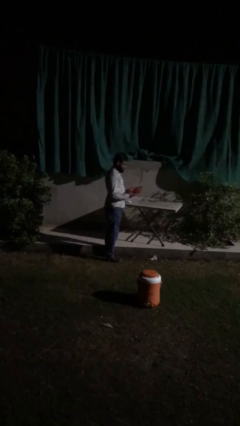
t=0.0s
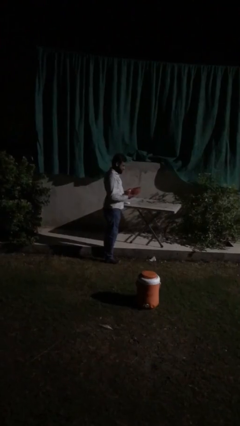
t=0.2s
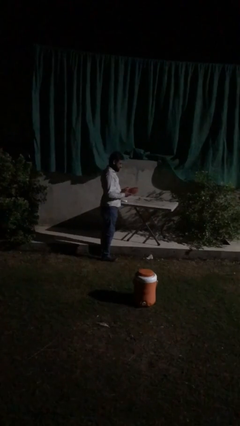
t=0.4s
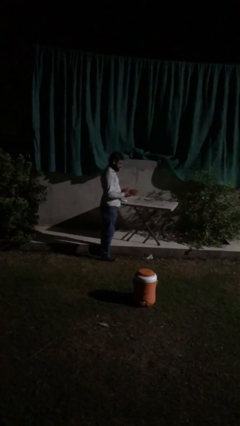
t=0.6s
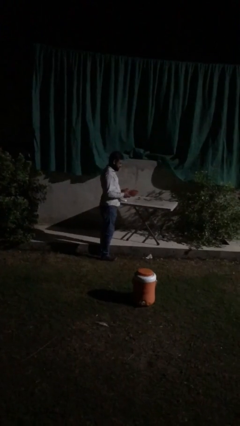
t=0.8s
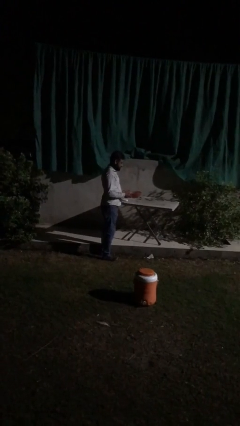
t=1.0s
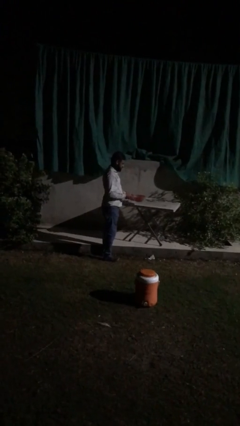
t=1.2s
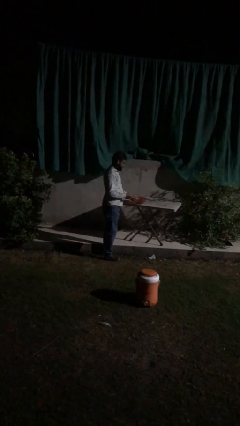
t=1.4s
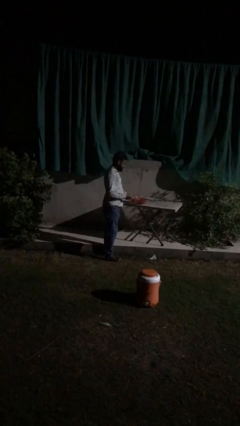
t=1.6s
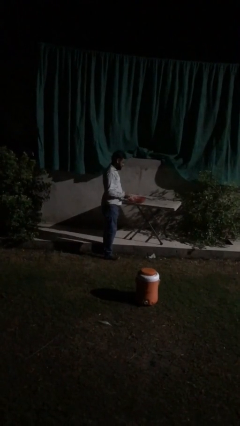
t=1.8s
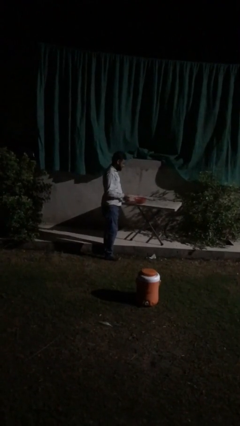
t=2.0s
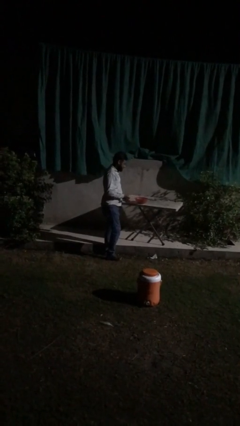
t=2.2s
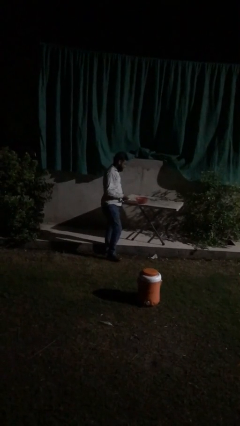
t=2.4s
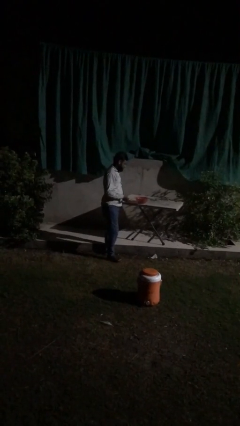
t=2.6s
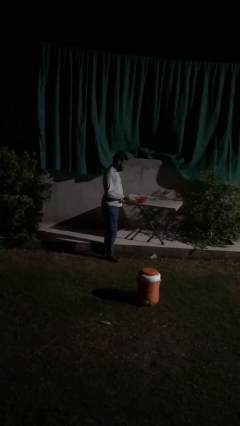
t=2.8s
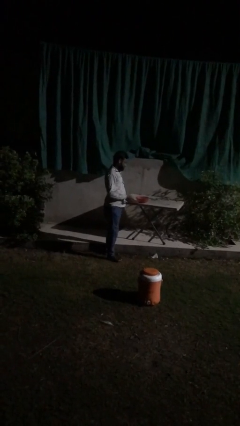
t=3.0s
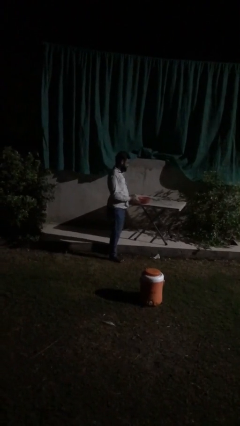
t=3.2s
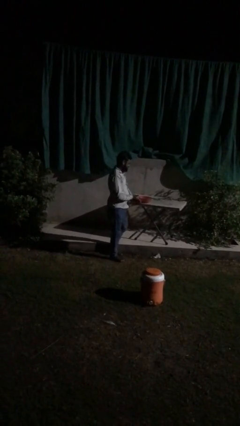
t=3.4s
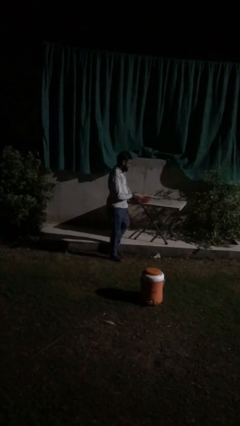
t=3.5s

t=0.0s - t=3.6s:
person puts down object on table

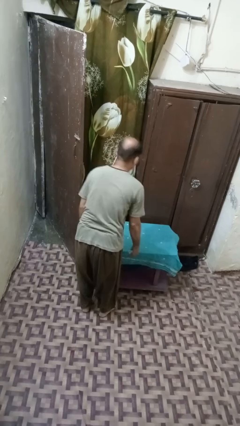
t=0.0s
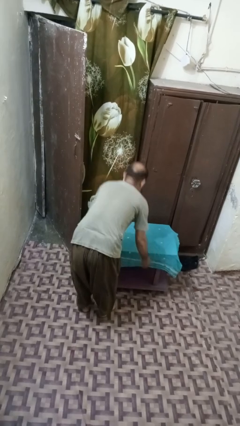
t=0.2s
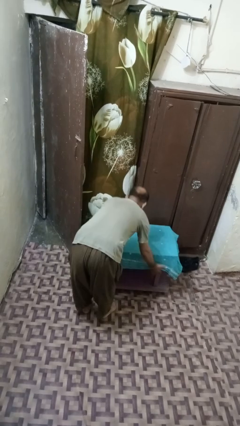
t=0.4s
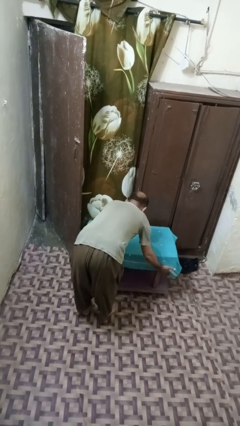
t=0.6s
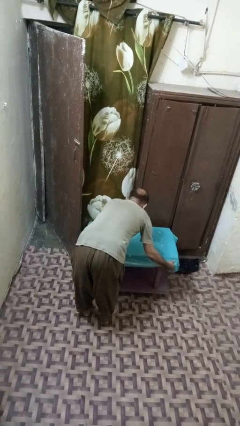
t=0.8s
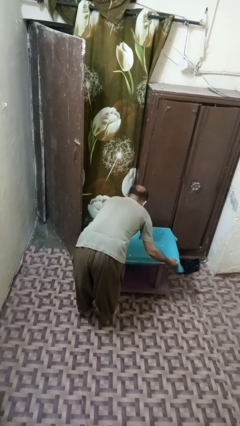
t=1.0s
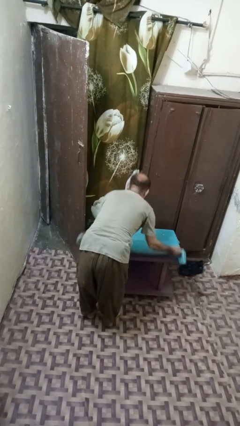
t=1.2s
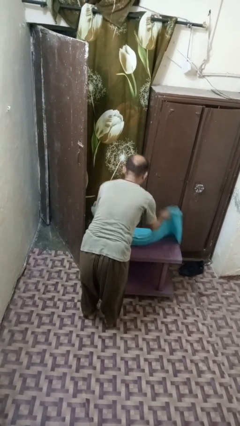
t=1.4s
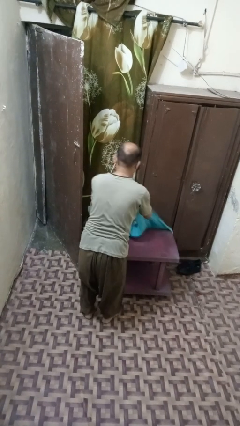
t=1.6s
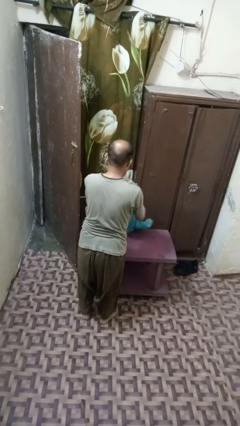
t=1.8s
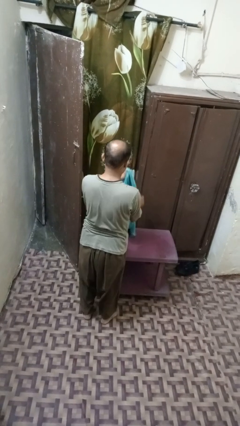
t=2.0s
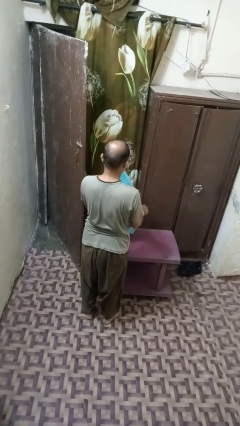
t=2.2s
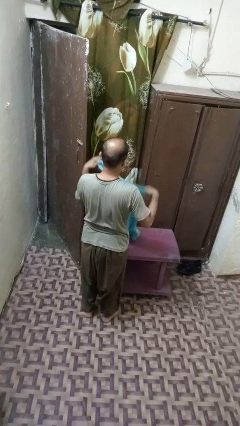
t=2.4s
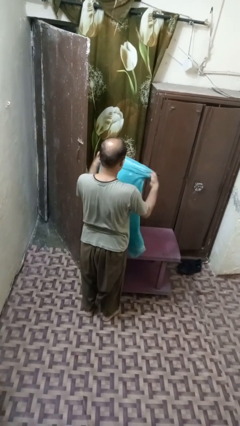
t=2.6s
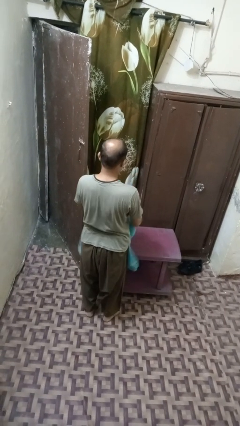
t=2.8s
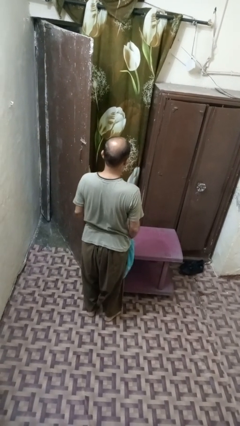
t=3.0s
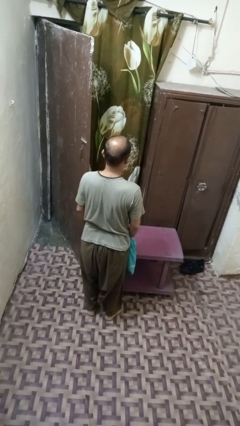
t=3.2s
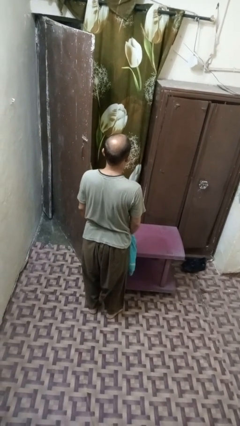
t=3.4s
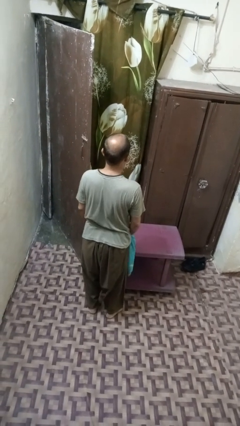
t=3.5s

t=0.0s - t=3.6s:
person folds tablecloth

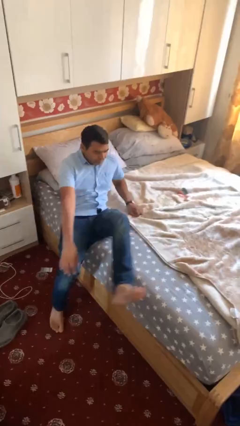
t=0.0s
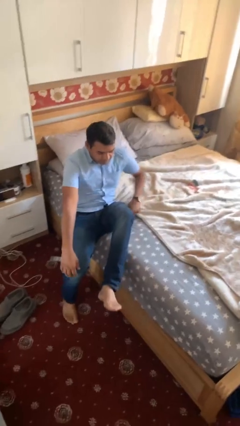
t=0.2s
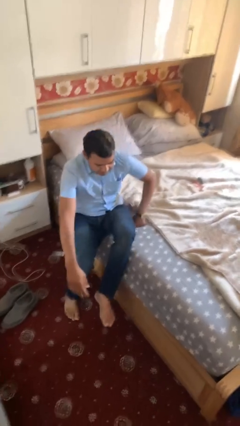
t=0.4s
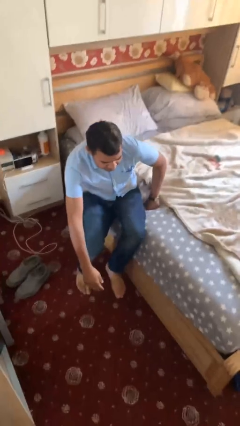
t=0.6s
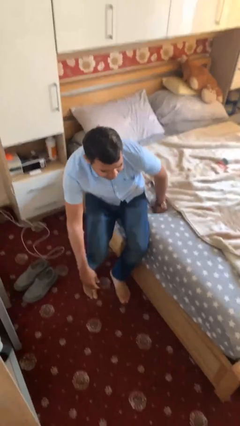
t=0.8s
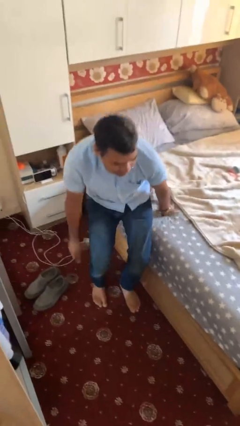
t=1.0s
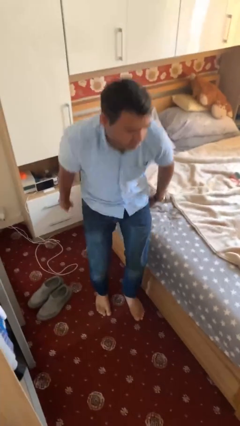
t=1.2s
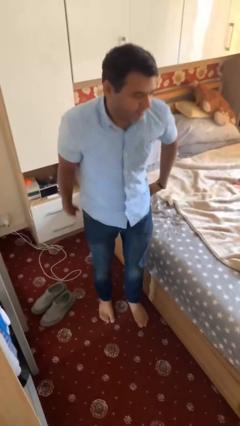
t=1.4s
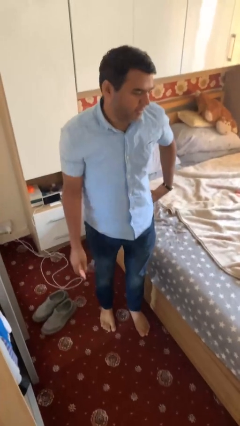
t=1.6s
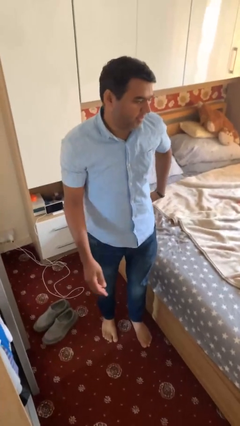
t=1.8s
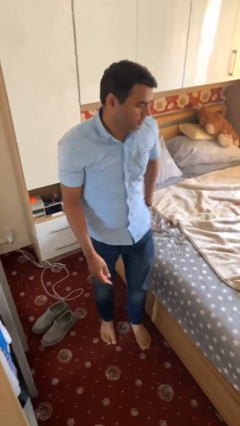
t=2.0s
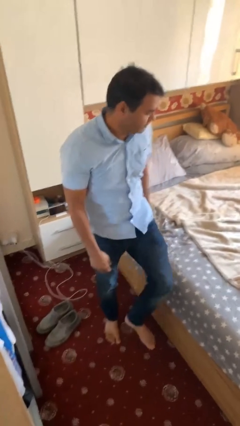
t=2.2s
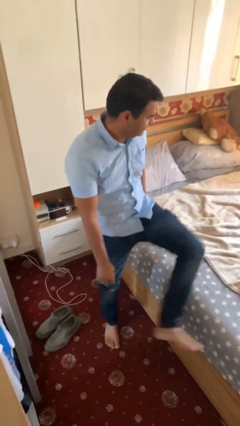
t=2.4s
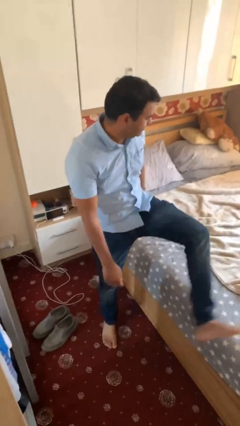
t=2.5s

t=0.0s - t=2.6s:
person stands up

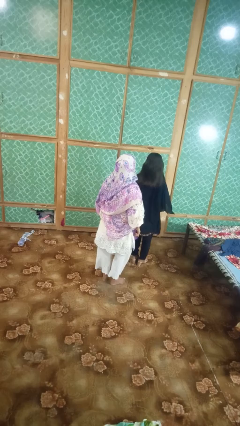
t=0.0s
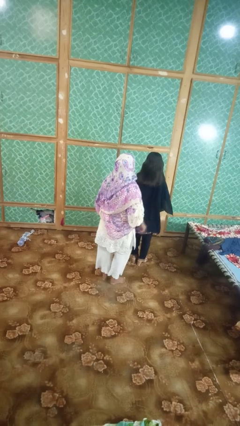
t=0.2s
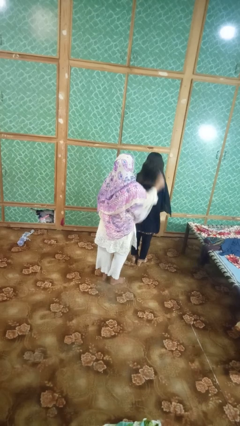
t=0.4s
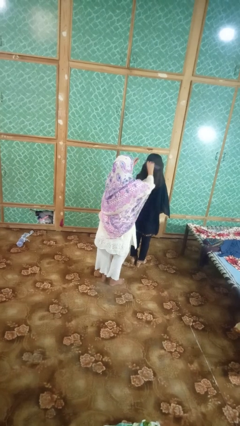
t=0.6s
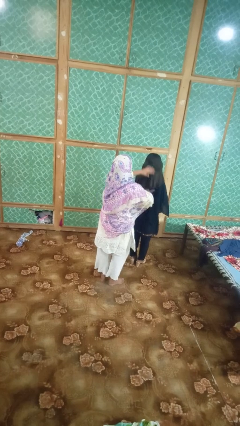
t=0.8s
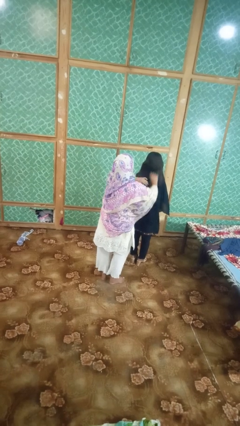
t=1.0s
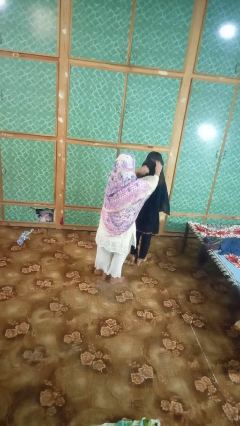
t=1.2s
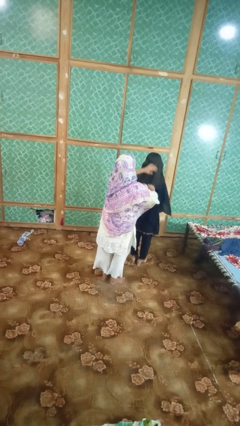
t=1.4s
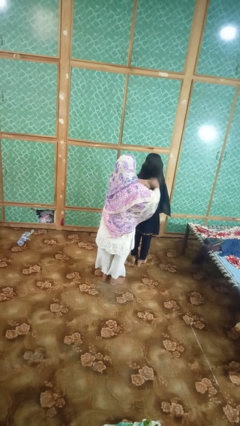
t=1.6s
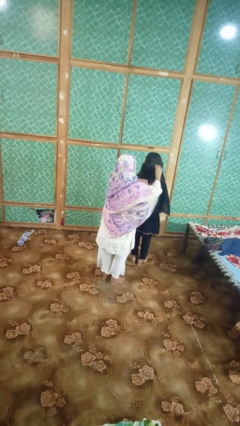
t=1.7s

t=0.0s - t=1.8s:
person brushes hair of person

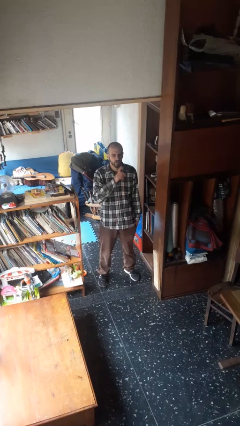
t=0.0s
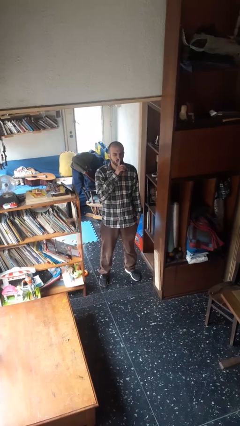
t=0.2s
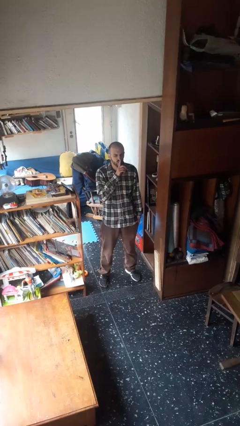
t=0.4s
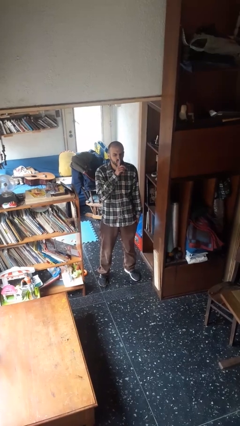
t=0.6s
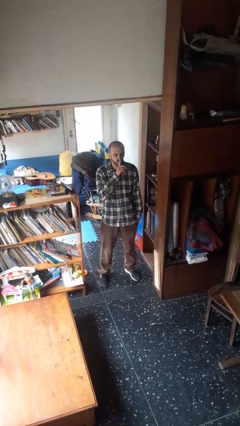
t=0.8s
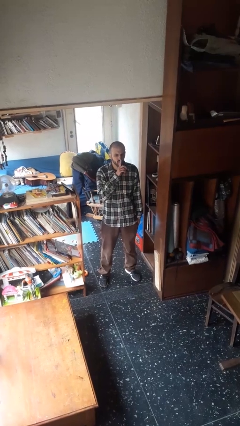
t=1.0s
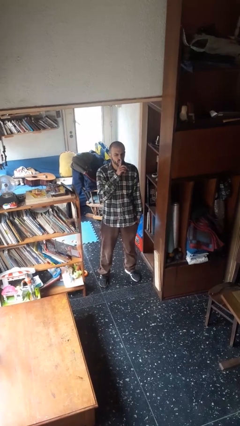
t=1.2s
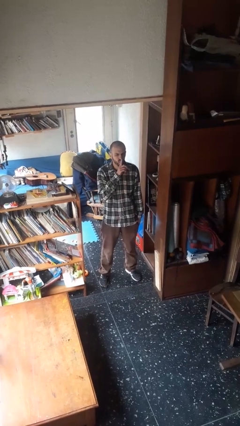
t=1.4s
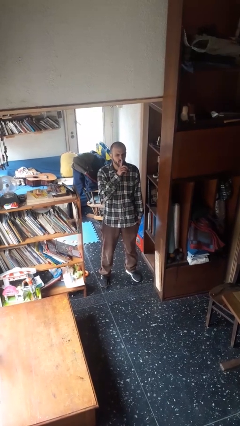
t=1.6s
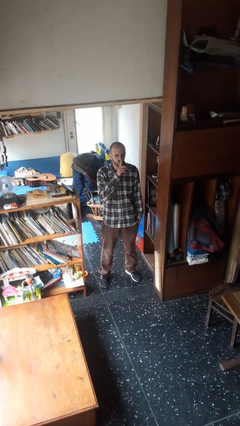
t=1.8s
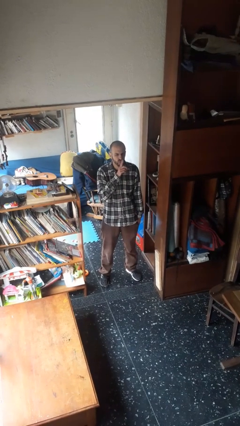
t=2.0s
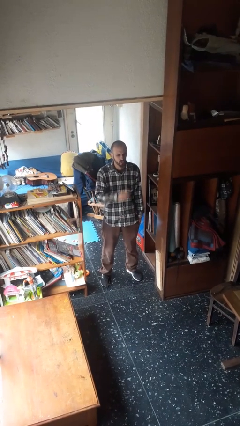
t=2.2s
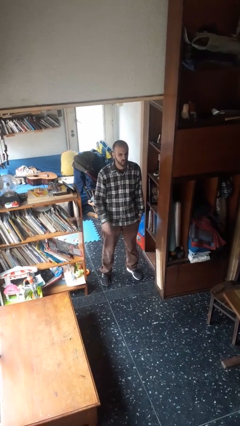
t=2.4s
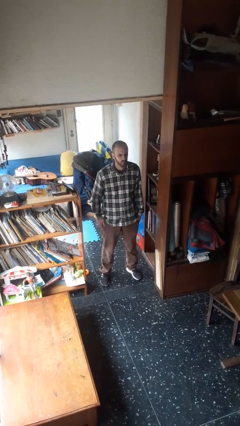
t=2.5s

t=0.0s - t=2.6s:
person gestures be quiet

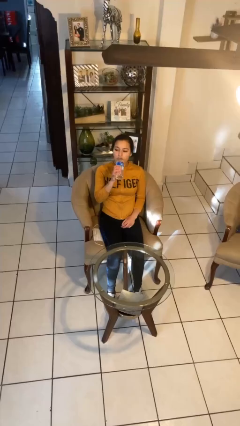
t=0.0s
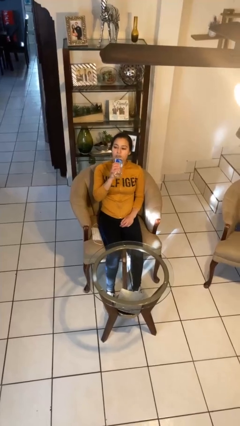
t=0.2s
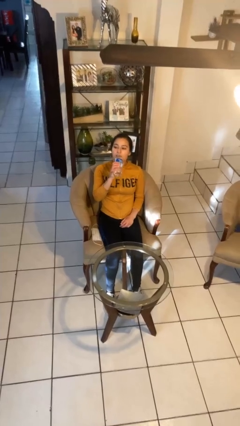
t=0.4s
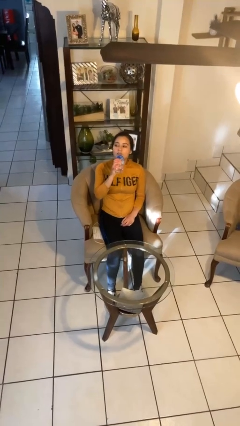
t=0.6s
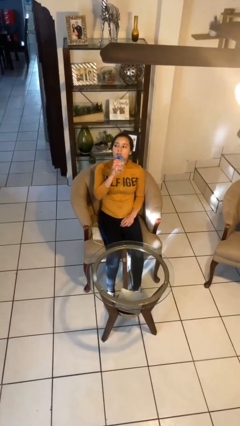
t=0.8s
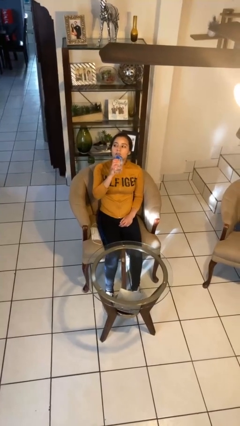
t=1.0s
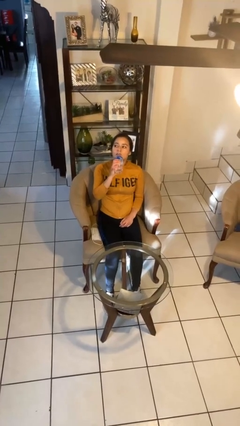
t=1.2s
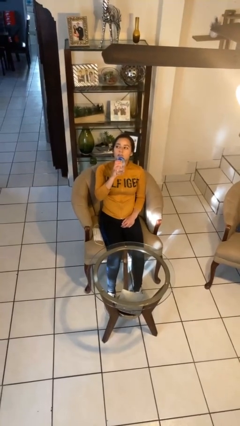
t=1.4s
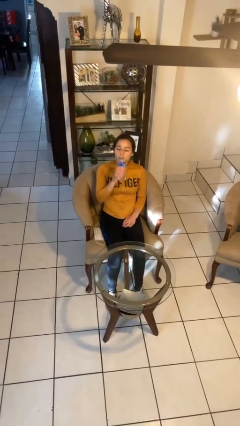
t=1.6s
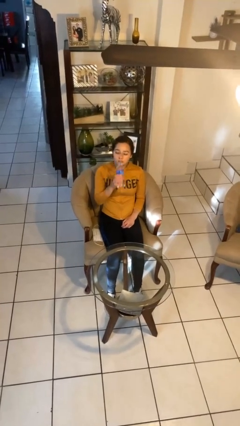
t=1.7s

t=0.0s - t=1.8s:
person drinks from bottle

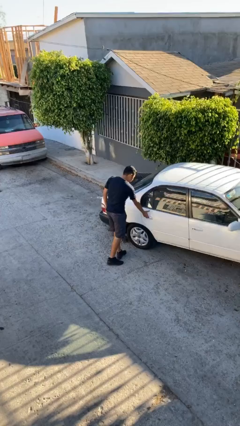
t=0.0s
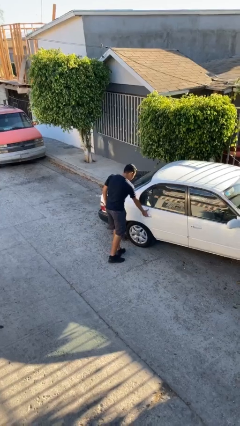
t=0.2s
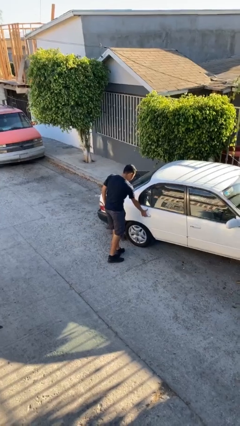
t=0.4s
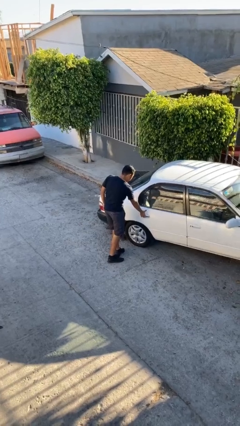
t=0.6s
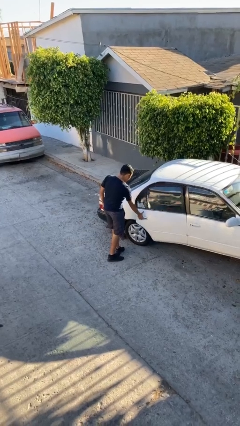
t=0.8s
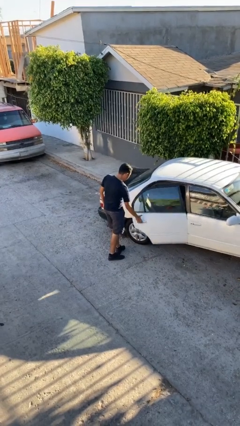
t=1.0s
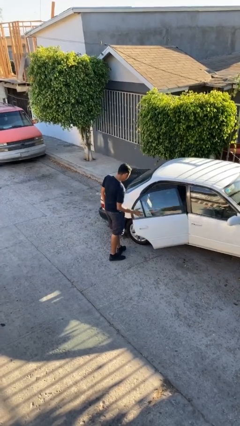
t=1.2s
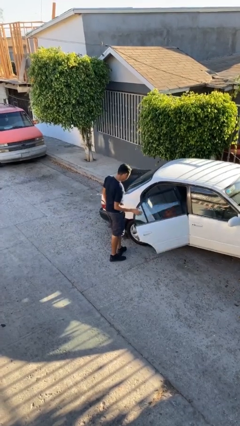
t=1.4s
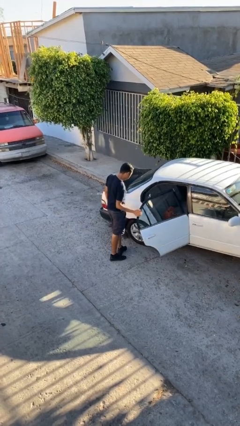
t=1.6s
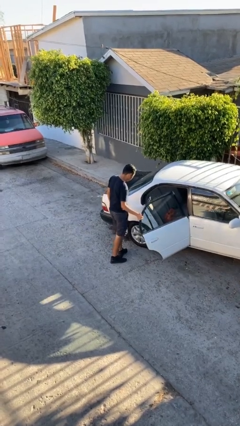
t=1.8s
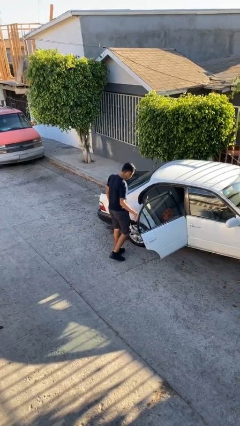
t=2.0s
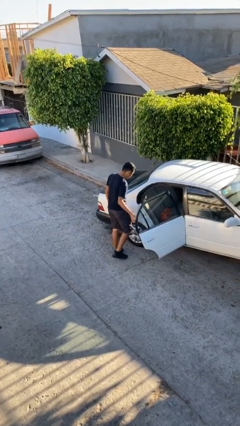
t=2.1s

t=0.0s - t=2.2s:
person opens car door
